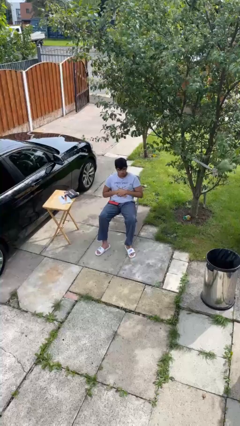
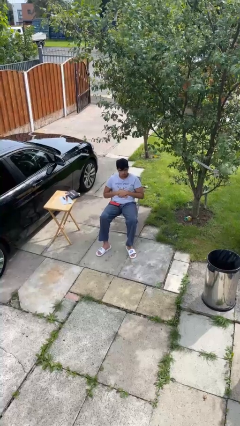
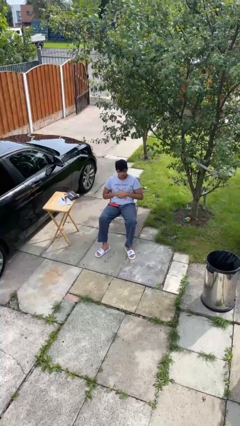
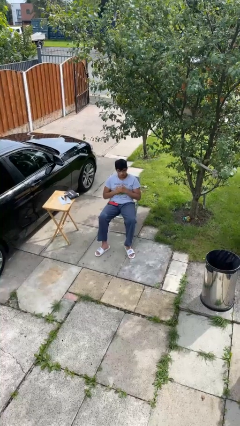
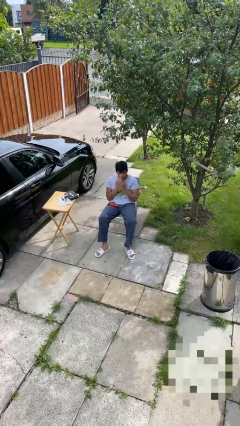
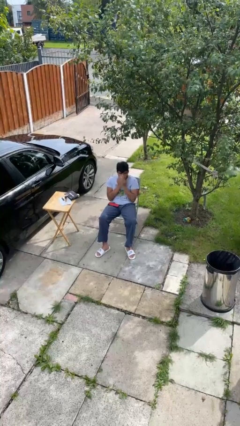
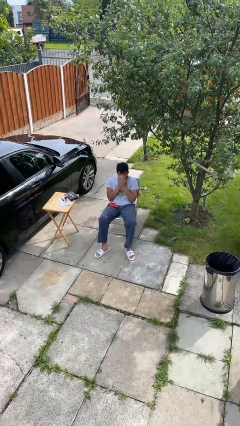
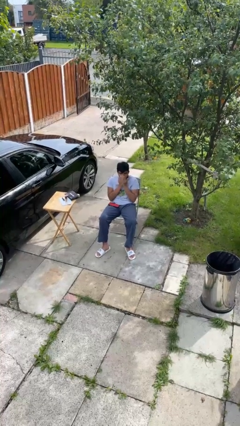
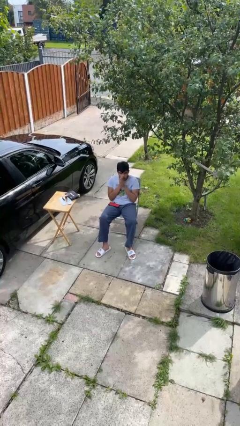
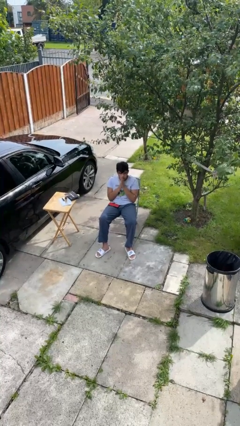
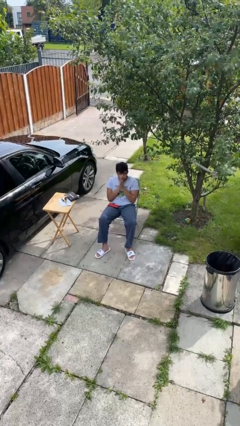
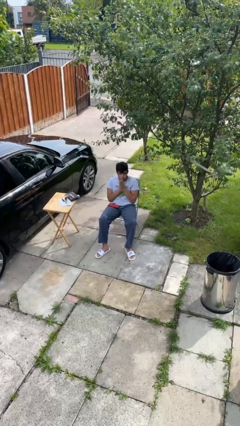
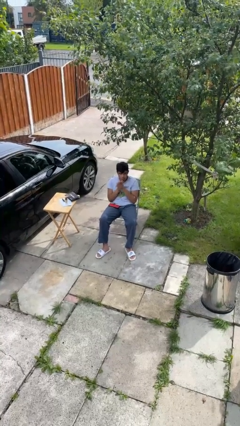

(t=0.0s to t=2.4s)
person blows into hands

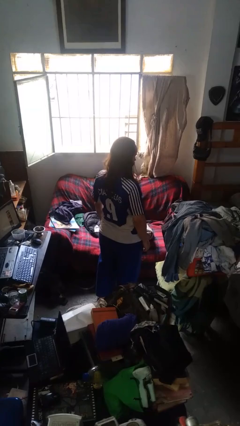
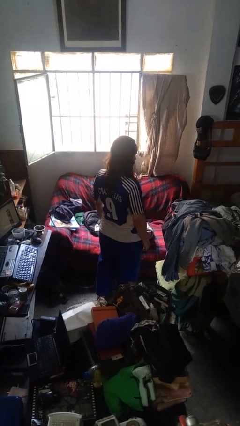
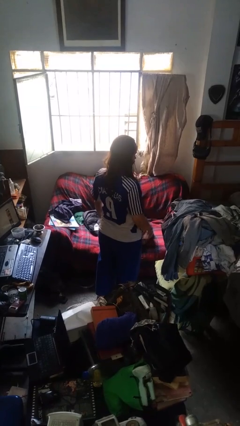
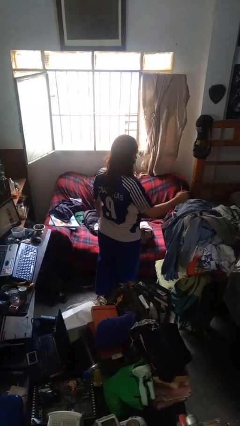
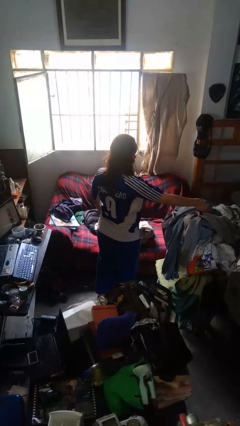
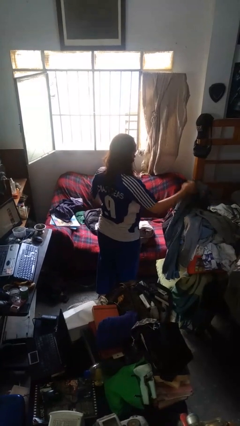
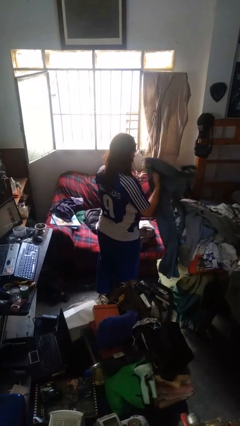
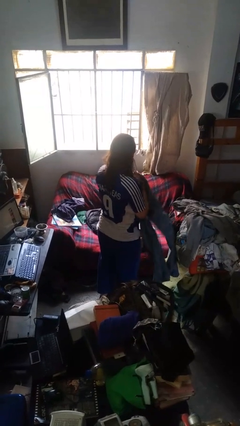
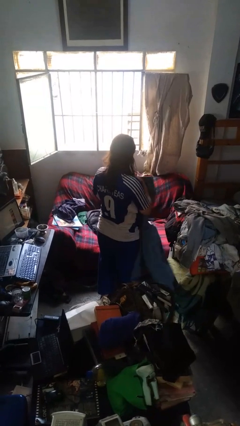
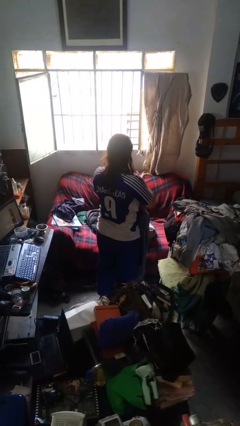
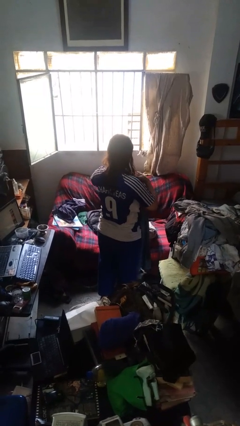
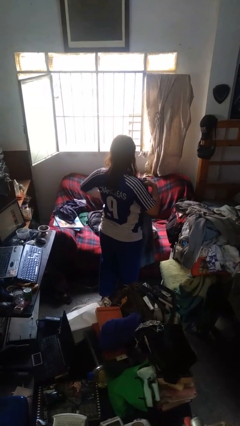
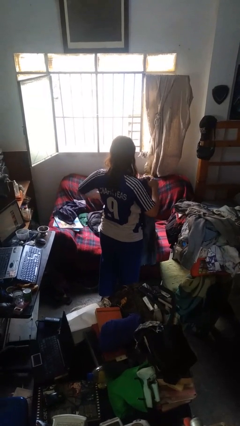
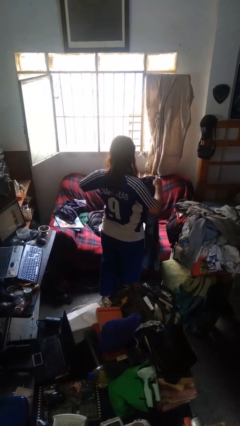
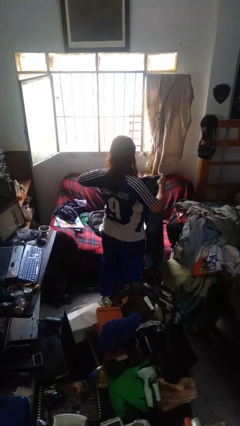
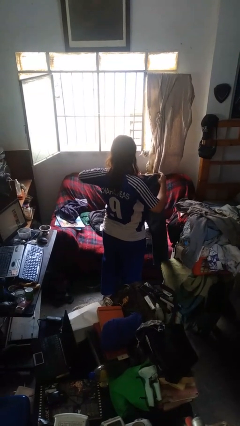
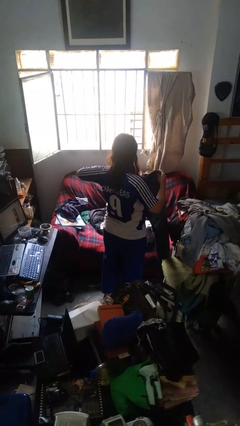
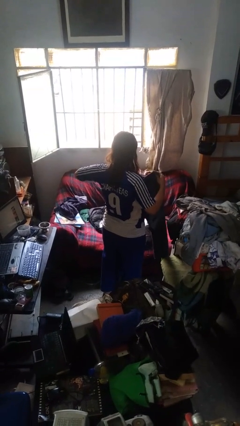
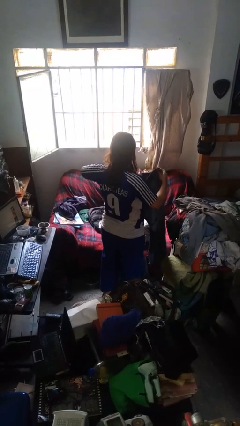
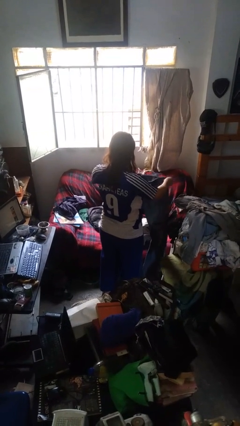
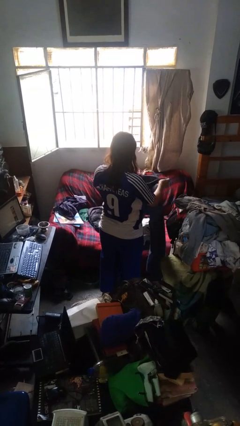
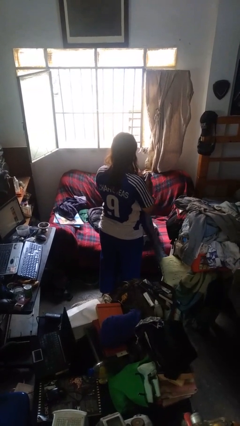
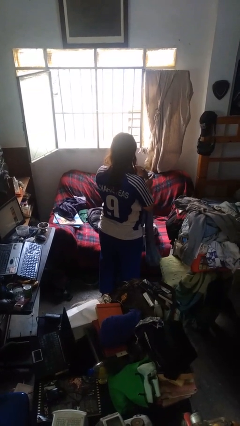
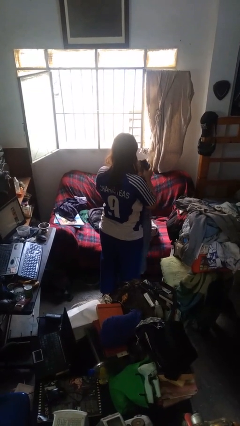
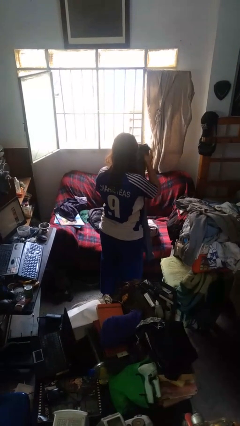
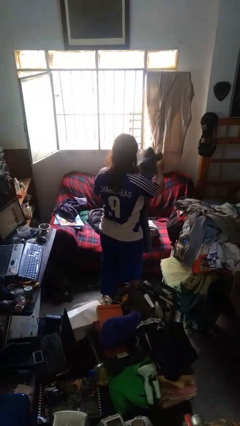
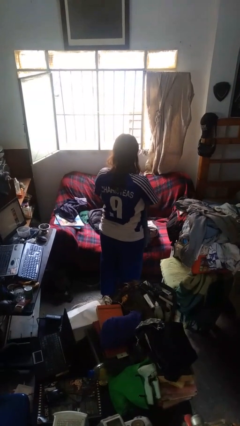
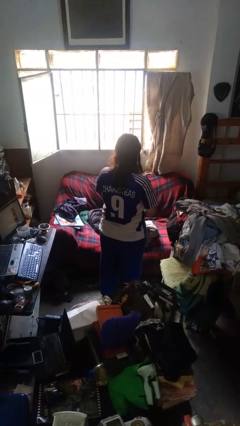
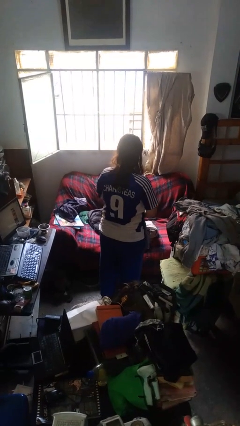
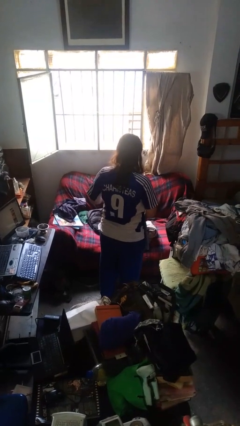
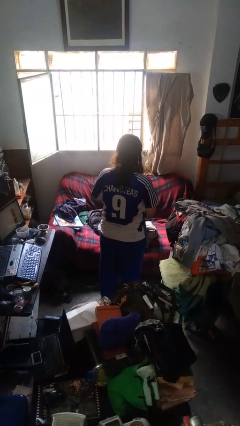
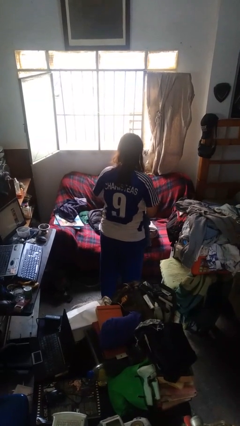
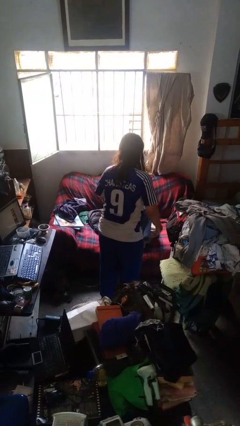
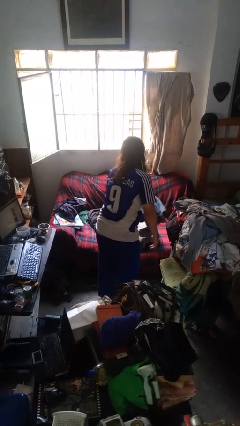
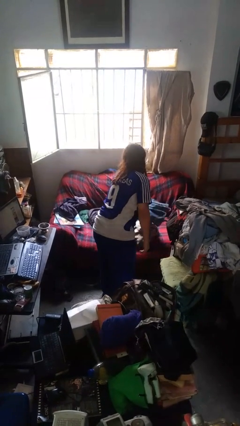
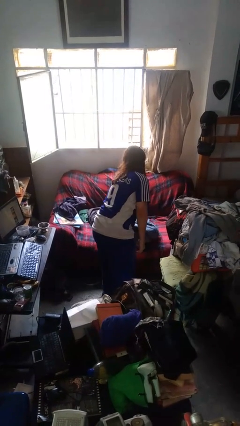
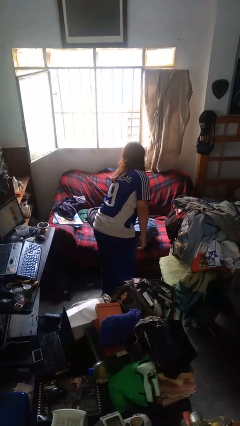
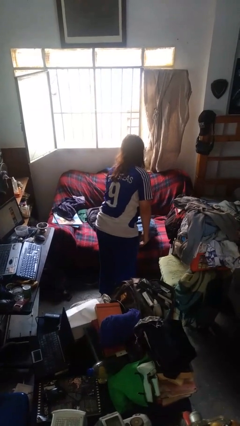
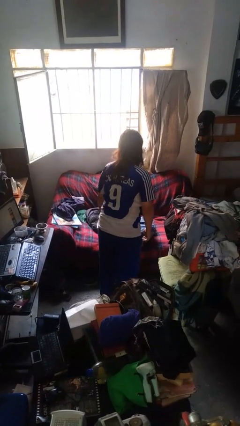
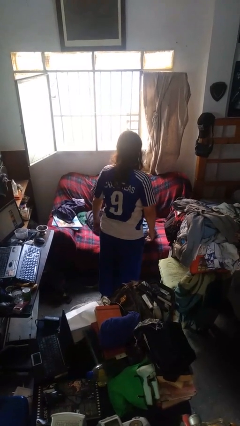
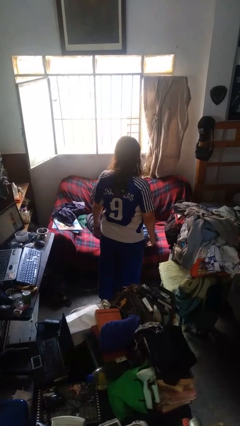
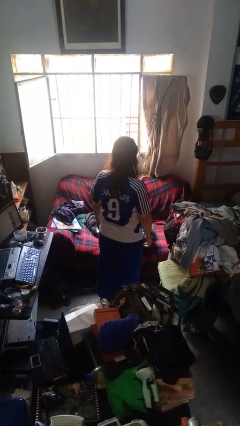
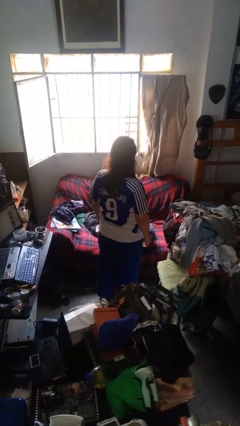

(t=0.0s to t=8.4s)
person folds pants

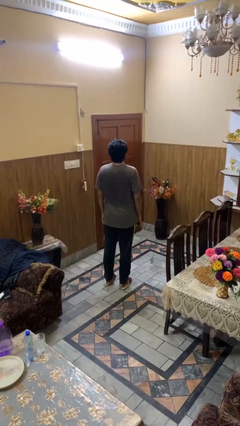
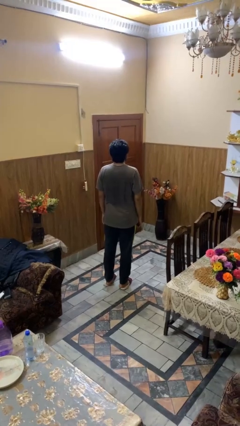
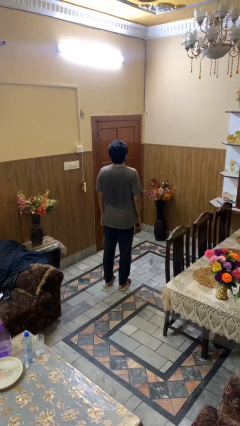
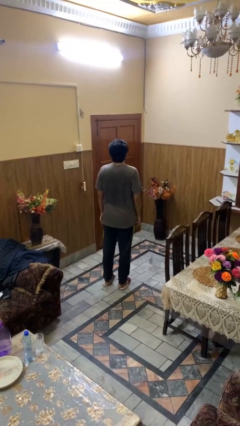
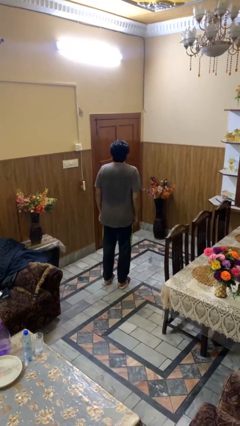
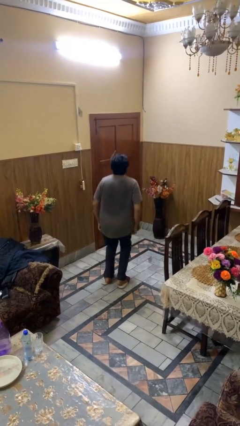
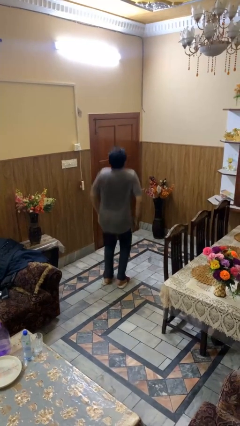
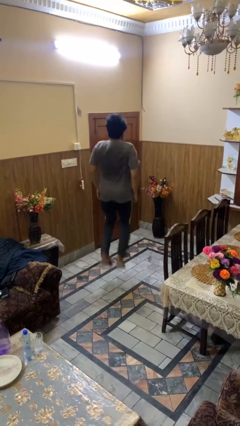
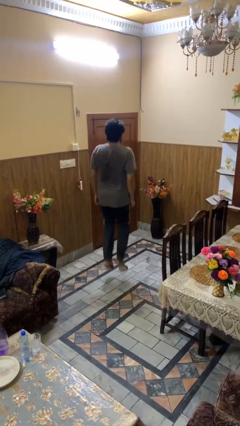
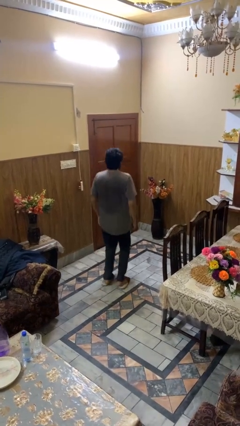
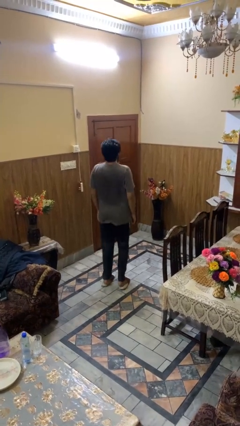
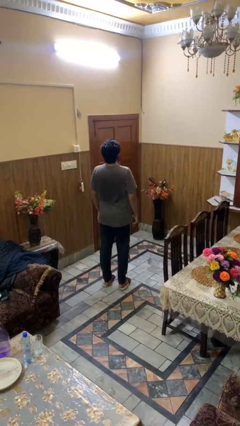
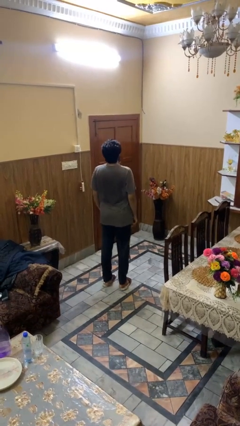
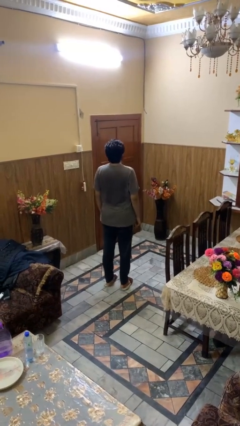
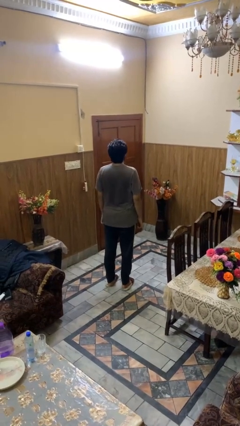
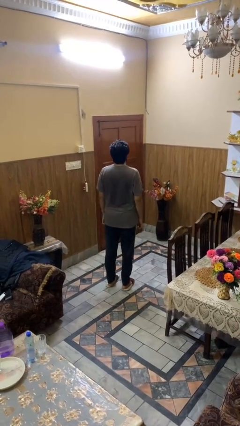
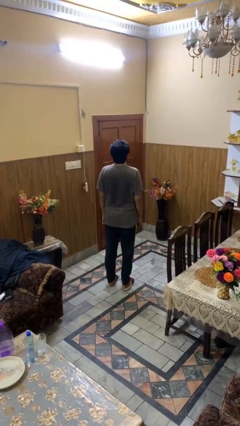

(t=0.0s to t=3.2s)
person jumps

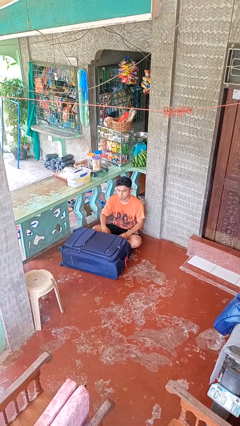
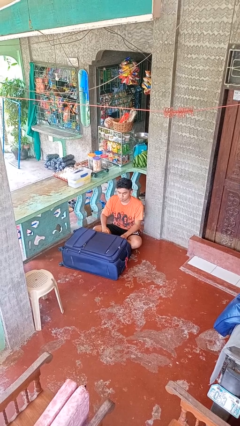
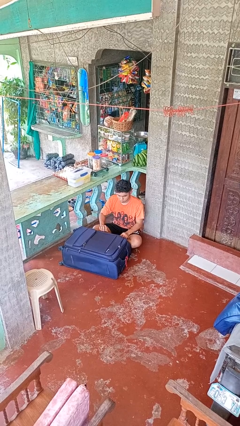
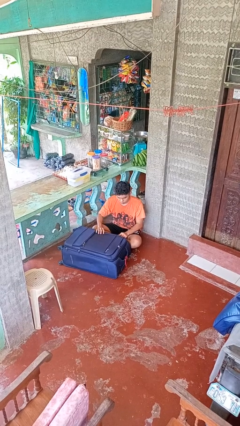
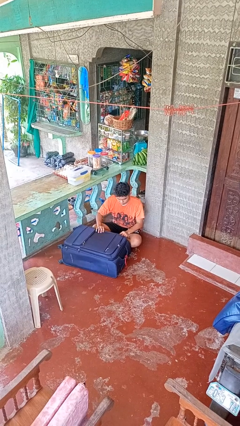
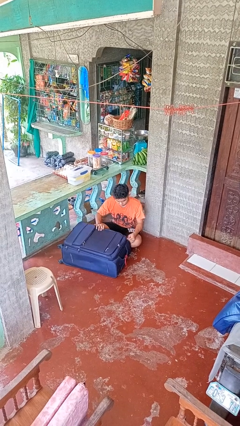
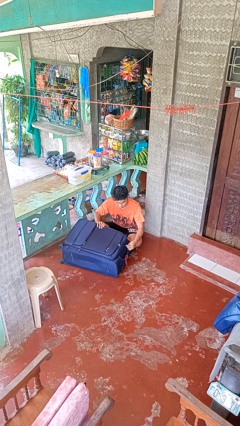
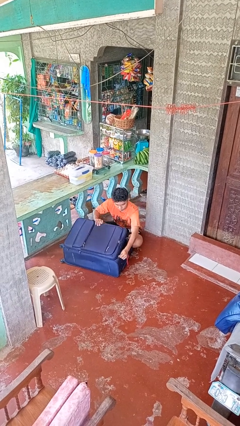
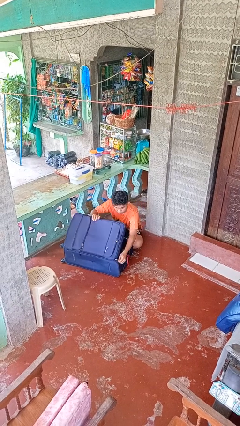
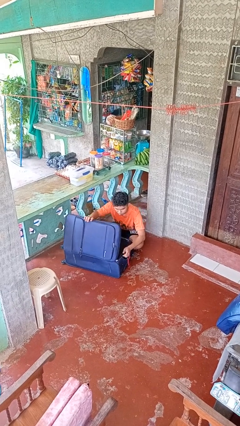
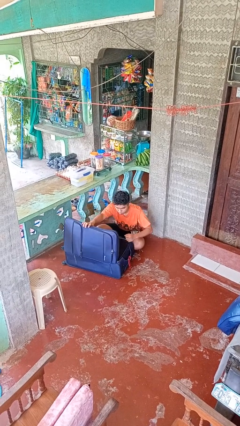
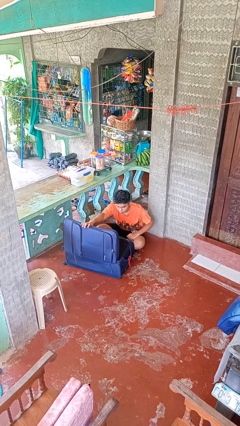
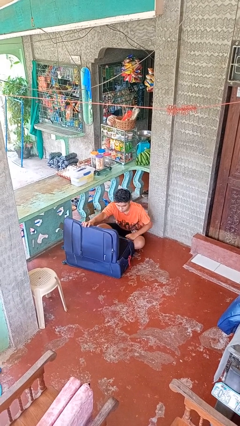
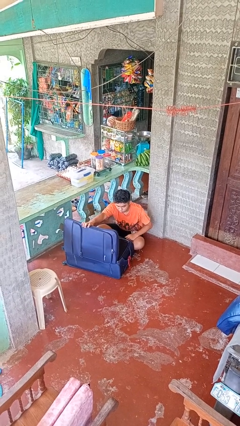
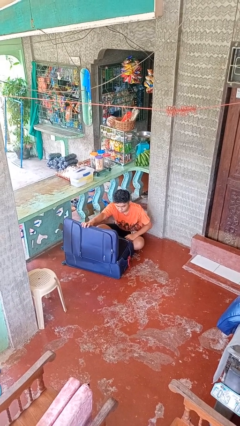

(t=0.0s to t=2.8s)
person opens suitcase

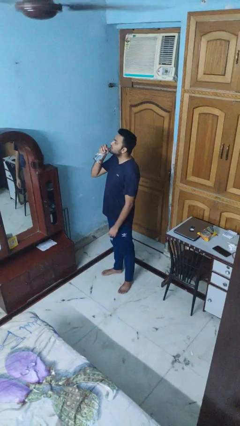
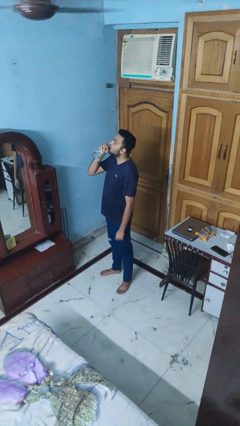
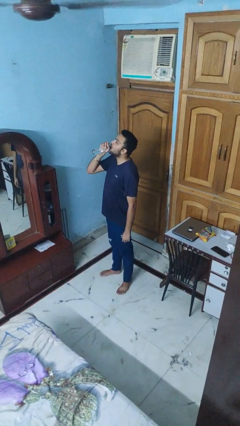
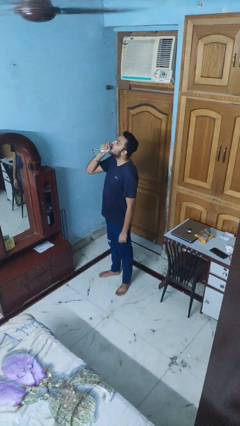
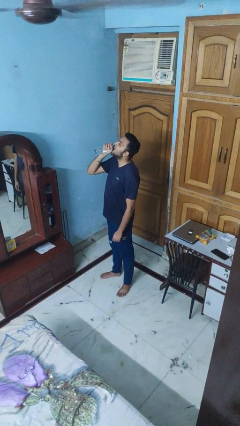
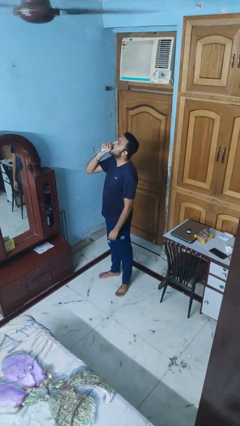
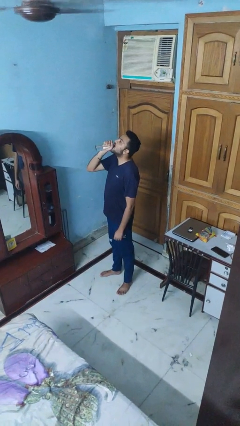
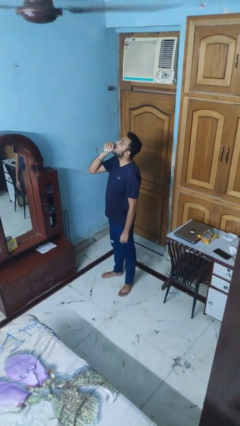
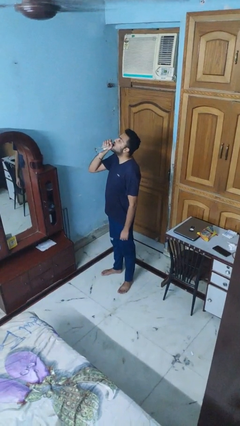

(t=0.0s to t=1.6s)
person drinks from bottle
